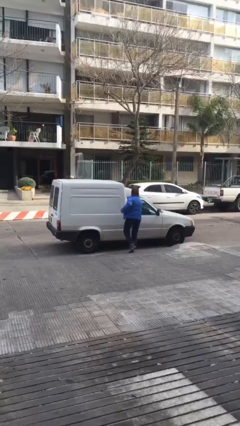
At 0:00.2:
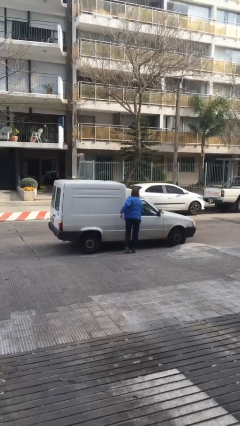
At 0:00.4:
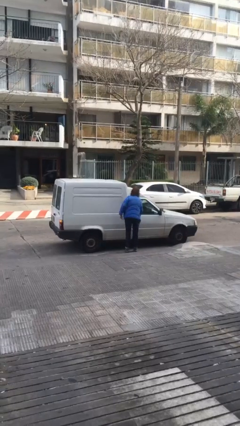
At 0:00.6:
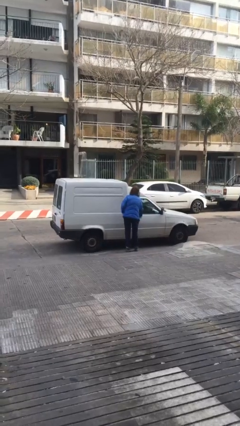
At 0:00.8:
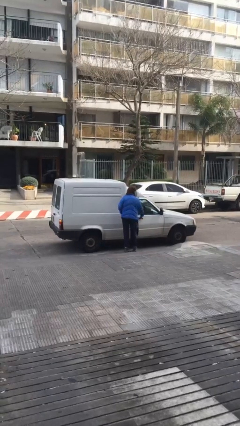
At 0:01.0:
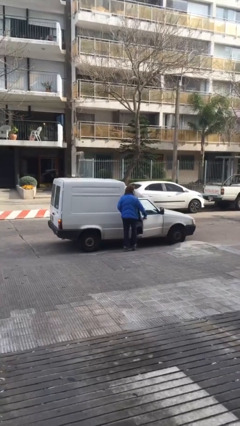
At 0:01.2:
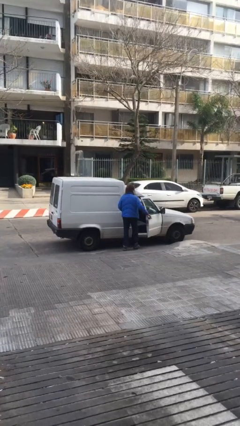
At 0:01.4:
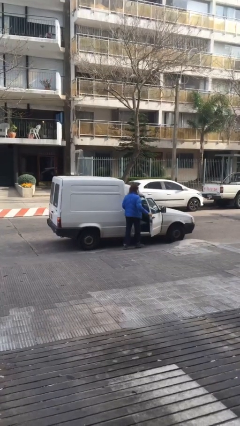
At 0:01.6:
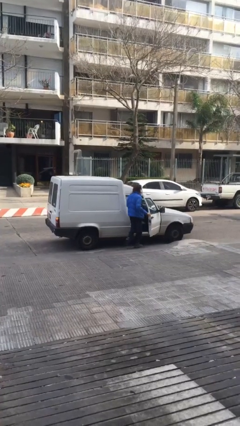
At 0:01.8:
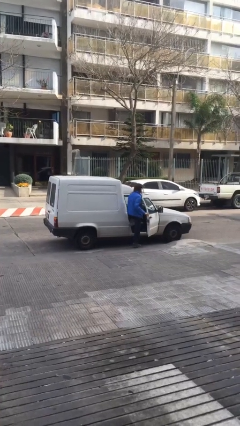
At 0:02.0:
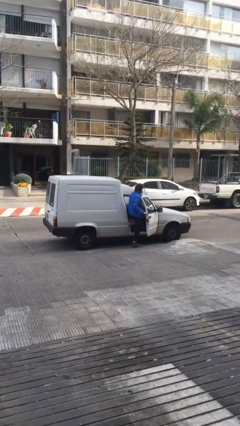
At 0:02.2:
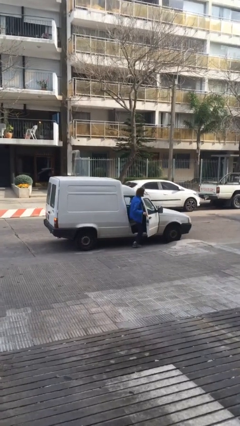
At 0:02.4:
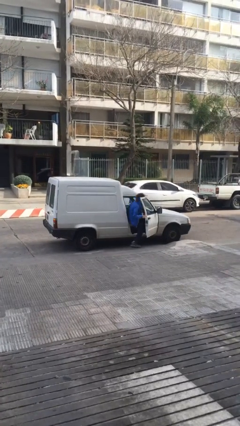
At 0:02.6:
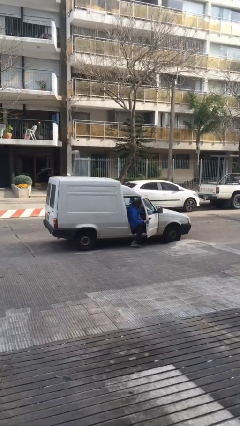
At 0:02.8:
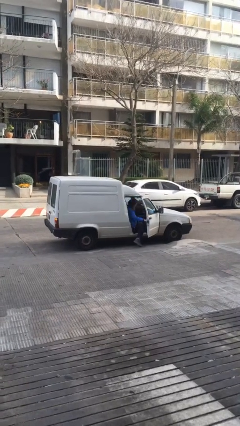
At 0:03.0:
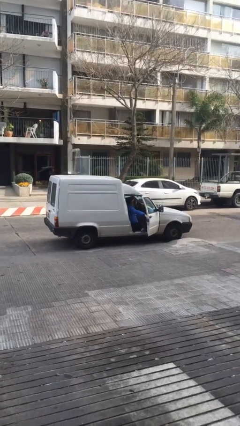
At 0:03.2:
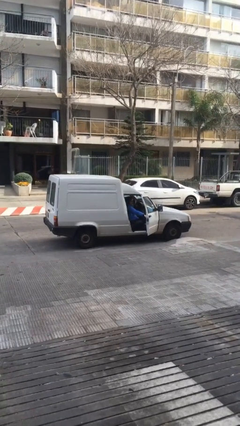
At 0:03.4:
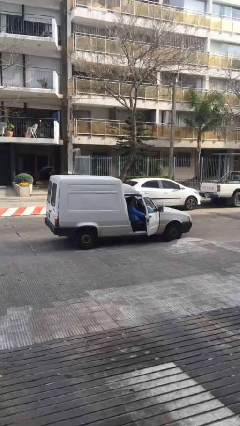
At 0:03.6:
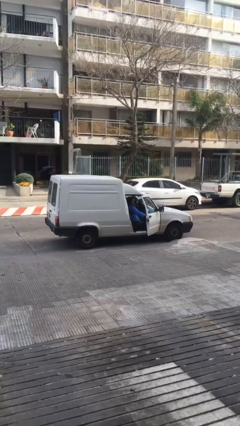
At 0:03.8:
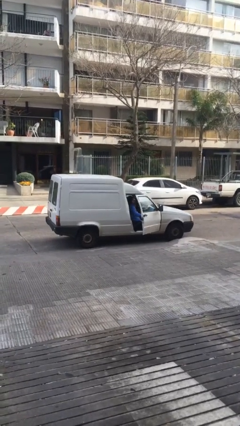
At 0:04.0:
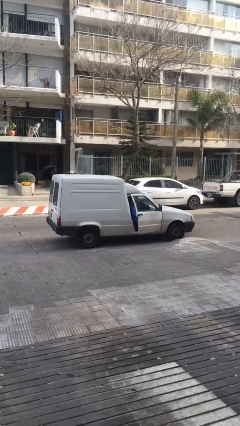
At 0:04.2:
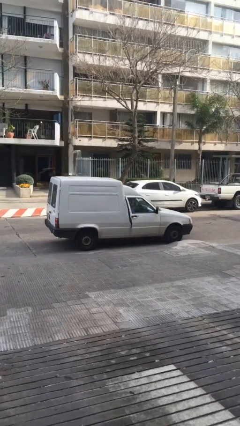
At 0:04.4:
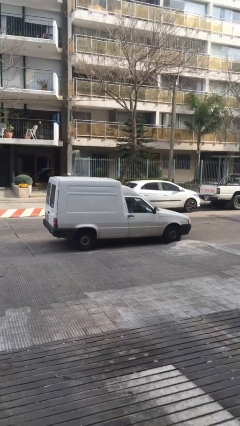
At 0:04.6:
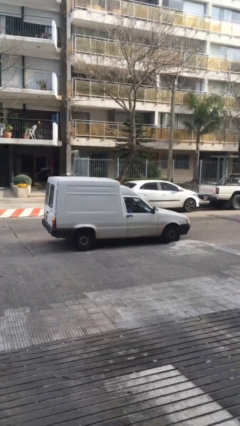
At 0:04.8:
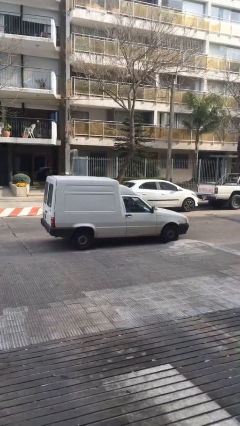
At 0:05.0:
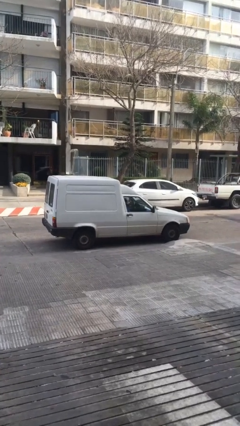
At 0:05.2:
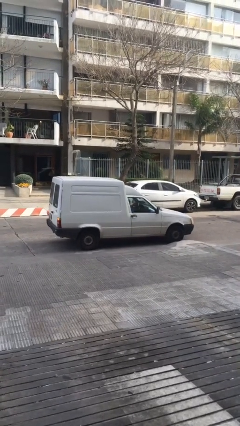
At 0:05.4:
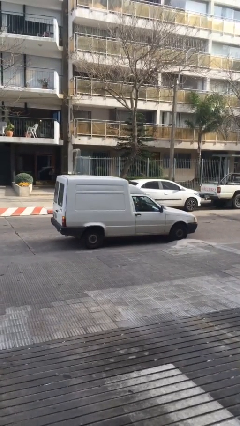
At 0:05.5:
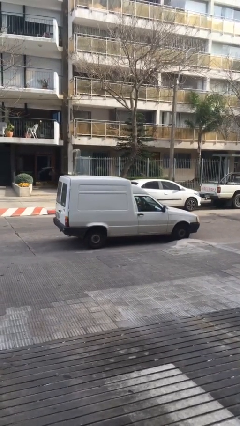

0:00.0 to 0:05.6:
car picks up person

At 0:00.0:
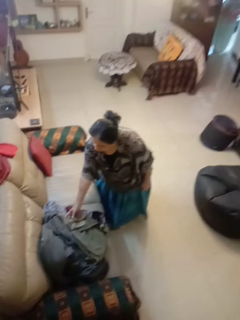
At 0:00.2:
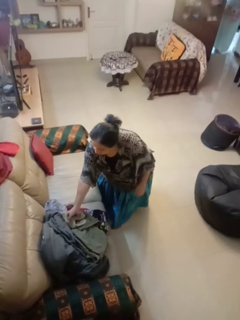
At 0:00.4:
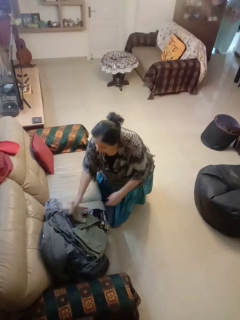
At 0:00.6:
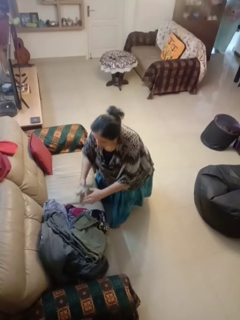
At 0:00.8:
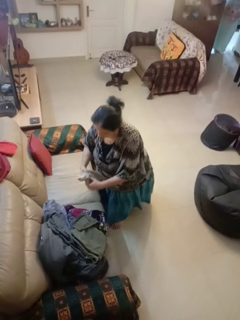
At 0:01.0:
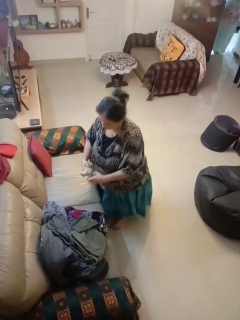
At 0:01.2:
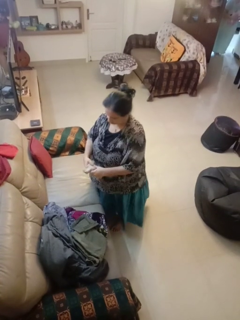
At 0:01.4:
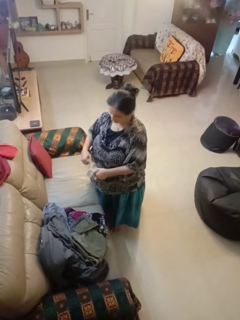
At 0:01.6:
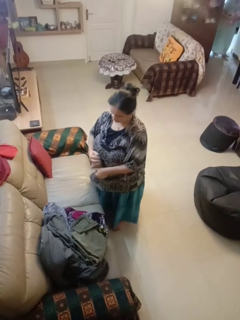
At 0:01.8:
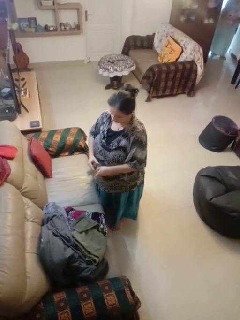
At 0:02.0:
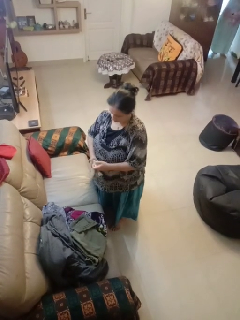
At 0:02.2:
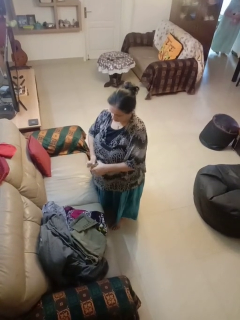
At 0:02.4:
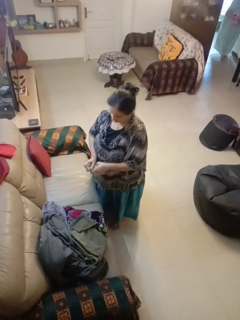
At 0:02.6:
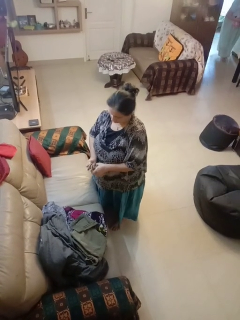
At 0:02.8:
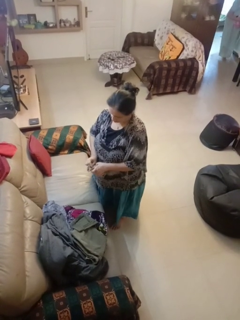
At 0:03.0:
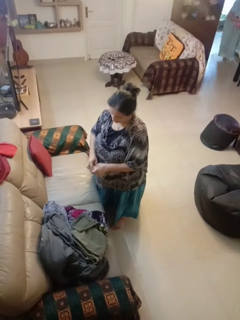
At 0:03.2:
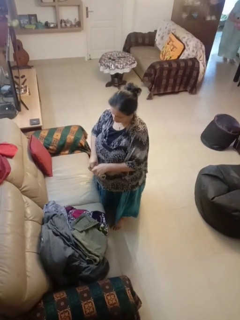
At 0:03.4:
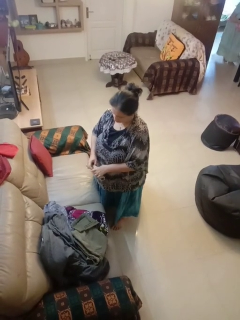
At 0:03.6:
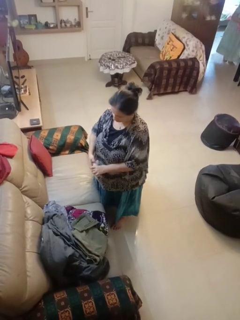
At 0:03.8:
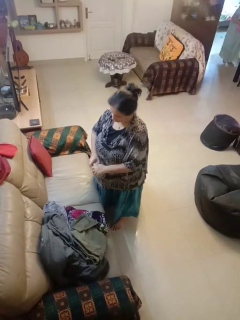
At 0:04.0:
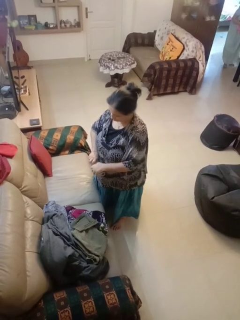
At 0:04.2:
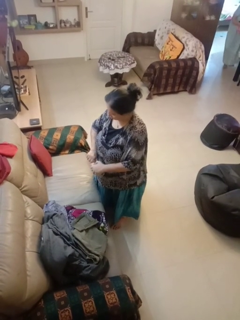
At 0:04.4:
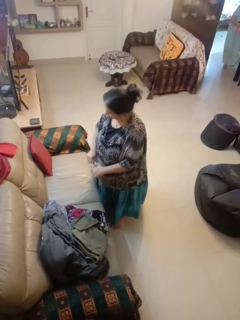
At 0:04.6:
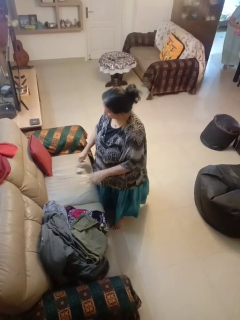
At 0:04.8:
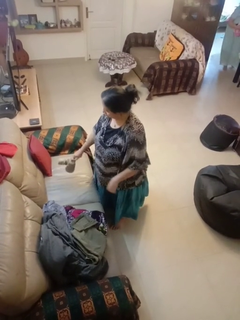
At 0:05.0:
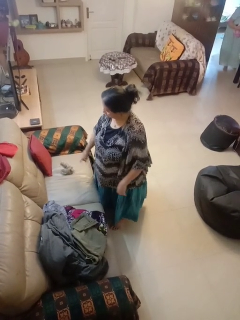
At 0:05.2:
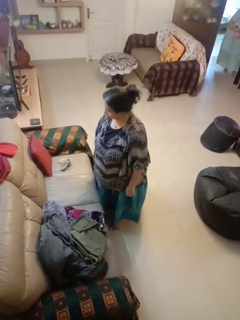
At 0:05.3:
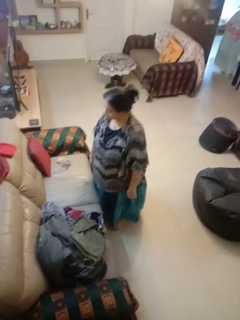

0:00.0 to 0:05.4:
person folds socks

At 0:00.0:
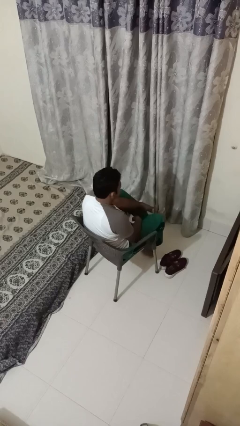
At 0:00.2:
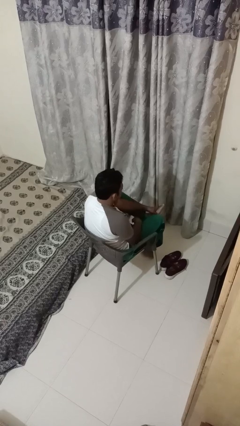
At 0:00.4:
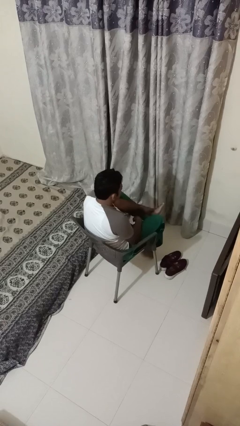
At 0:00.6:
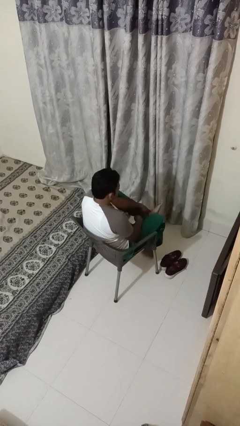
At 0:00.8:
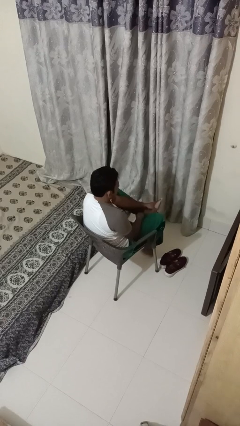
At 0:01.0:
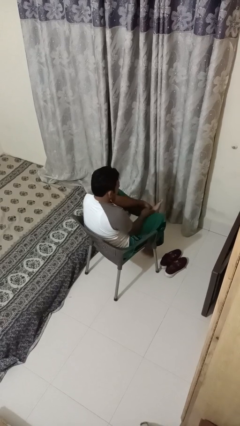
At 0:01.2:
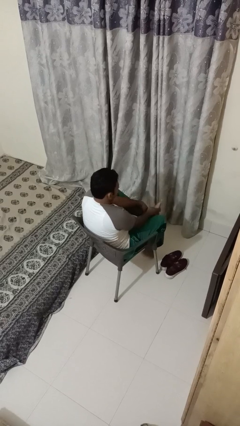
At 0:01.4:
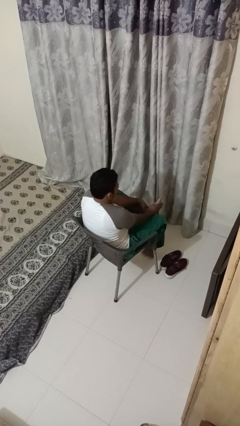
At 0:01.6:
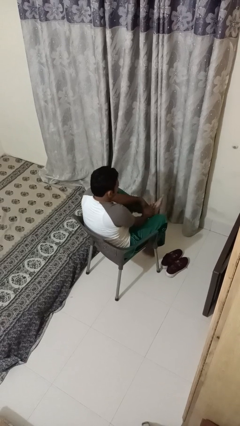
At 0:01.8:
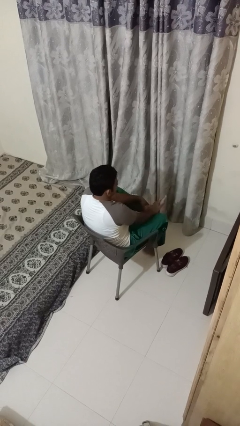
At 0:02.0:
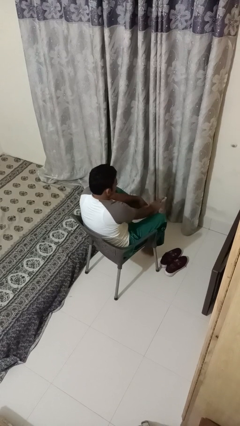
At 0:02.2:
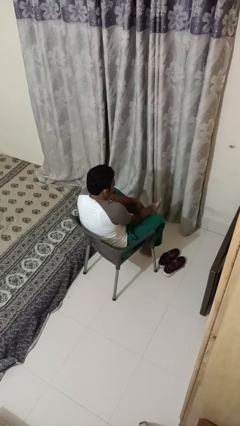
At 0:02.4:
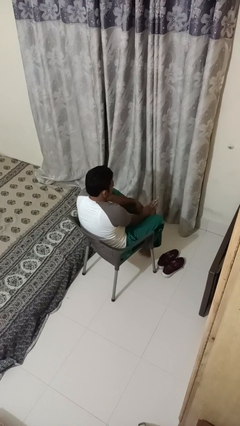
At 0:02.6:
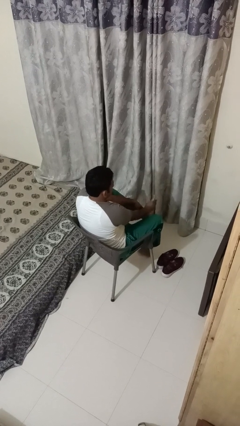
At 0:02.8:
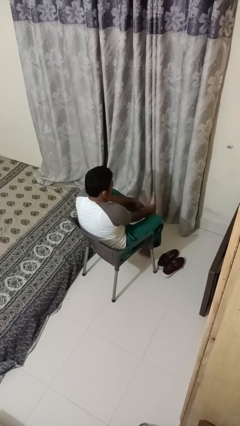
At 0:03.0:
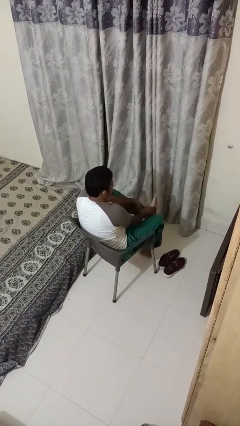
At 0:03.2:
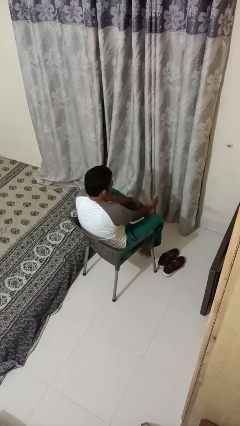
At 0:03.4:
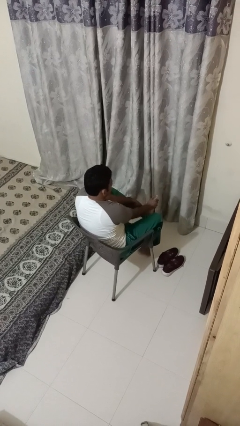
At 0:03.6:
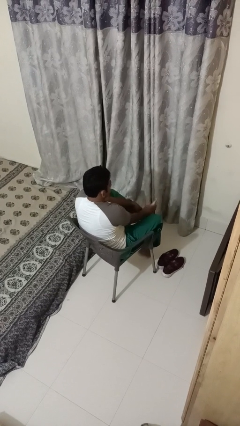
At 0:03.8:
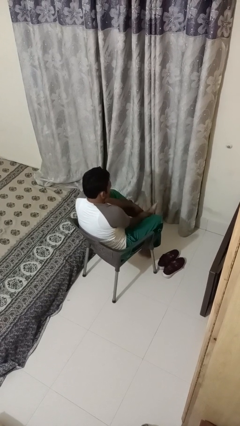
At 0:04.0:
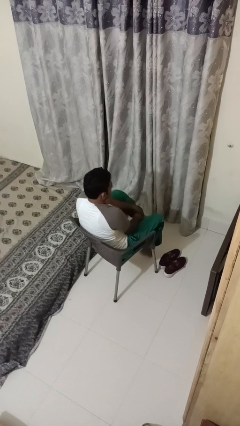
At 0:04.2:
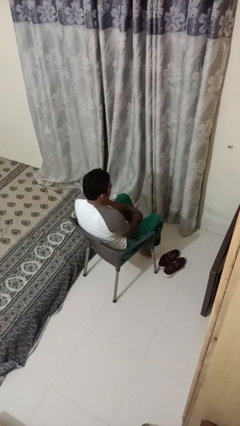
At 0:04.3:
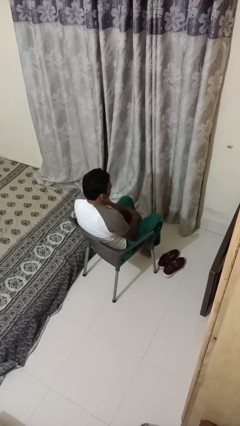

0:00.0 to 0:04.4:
person rubs foot

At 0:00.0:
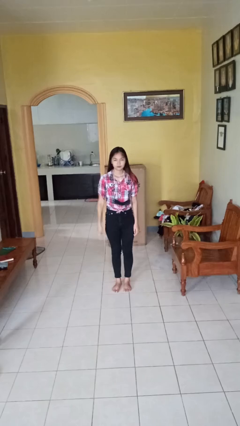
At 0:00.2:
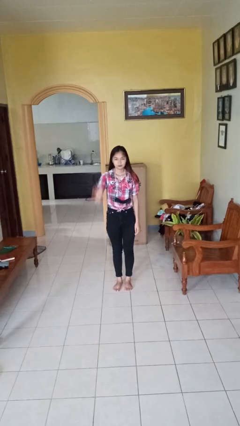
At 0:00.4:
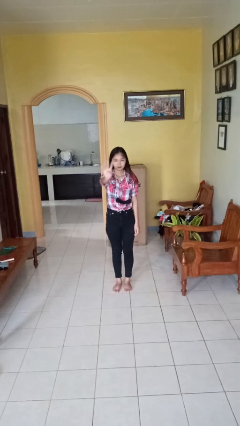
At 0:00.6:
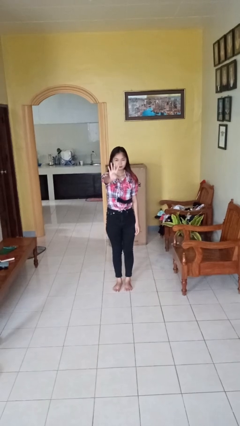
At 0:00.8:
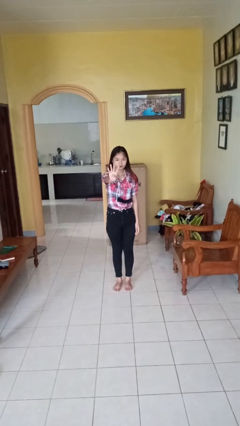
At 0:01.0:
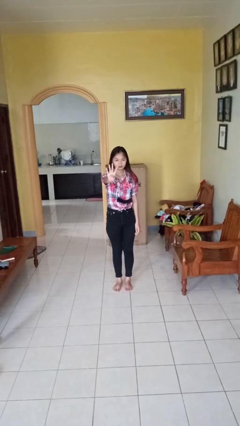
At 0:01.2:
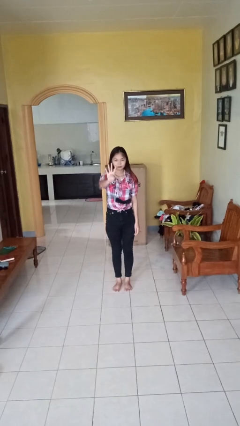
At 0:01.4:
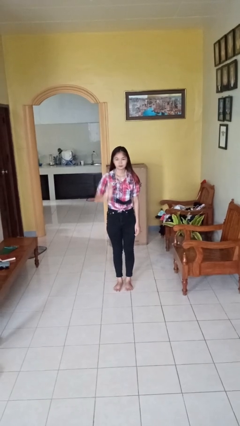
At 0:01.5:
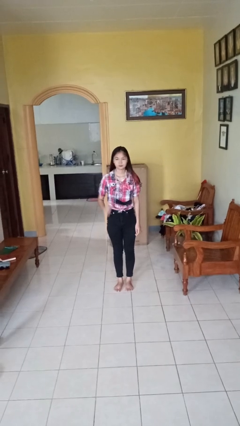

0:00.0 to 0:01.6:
person gestures number four

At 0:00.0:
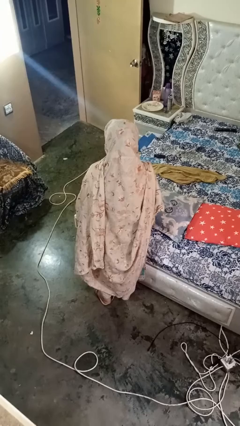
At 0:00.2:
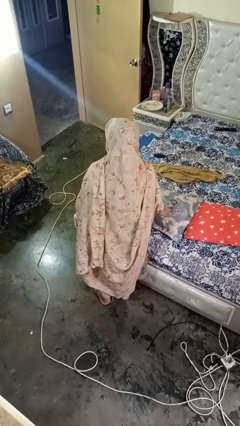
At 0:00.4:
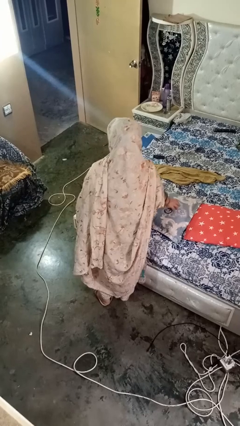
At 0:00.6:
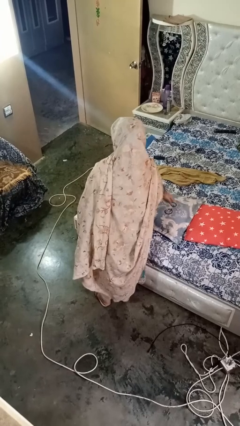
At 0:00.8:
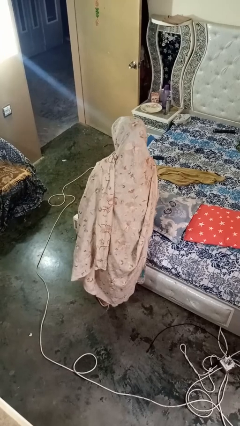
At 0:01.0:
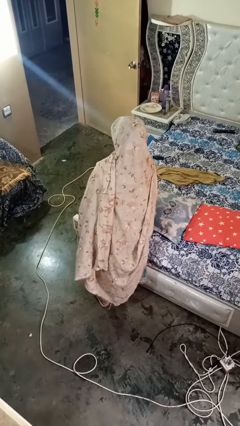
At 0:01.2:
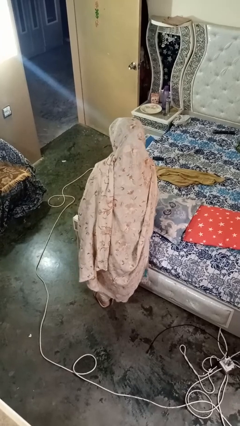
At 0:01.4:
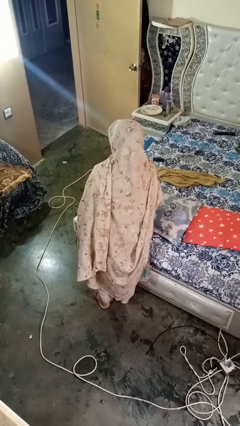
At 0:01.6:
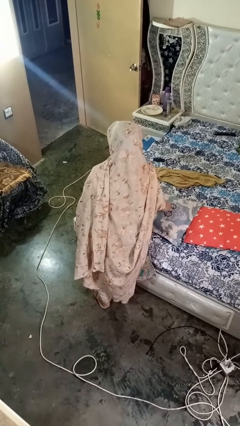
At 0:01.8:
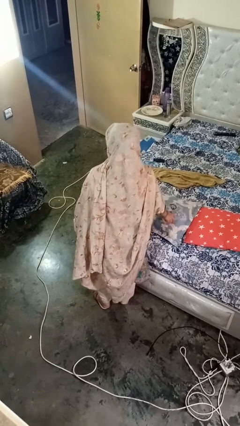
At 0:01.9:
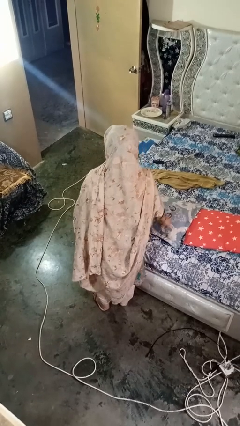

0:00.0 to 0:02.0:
person taps object with finger
